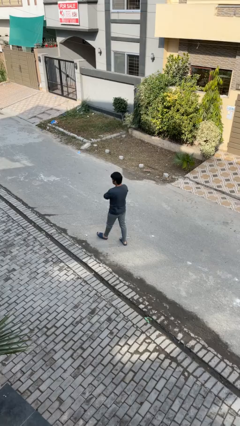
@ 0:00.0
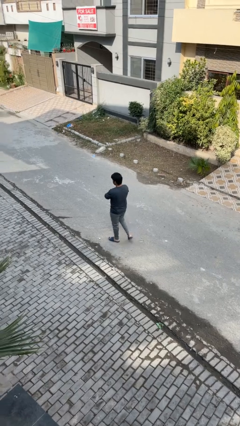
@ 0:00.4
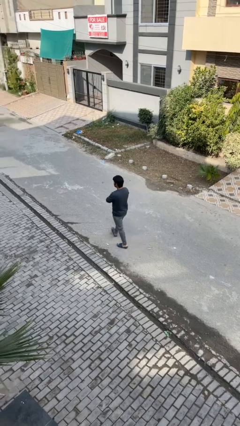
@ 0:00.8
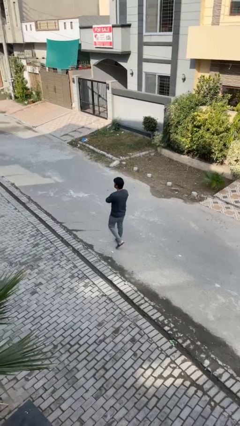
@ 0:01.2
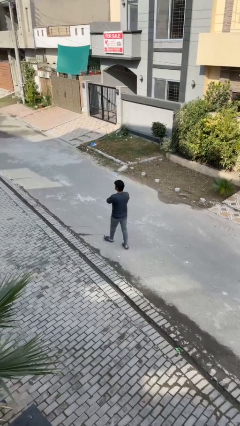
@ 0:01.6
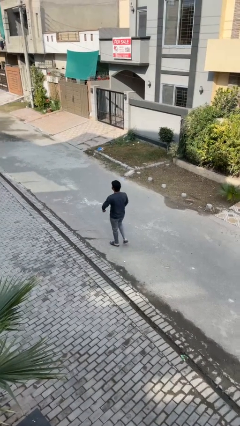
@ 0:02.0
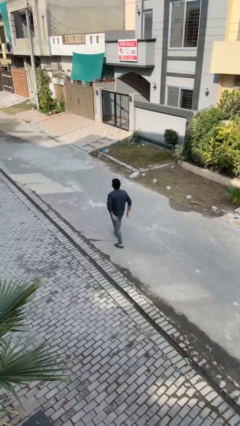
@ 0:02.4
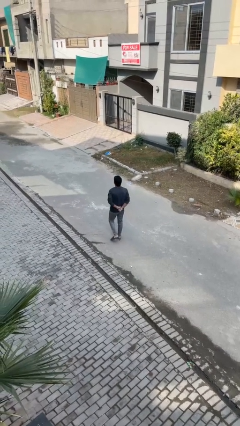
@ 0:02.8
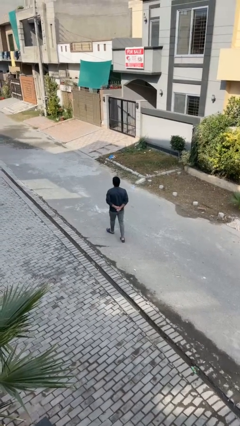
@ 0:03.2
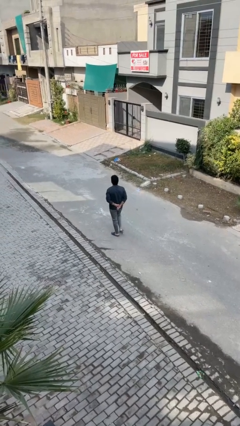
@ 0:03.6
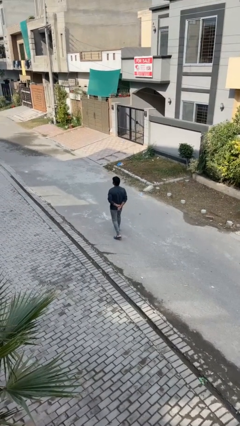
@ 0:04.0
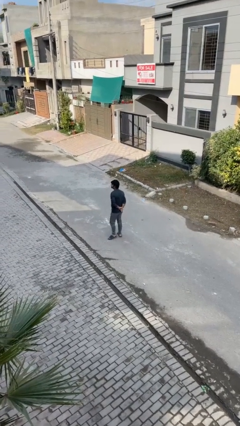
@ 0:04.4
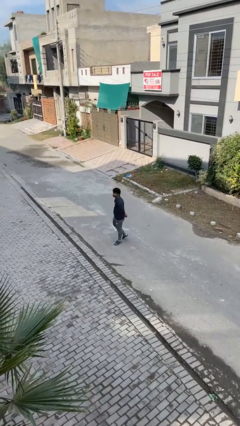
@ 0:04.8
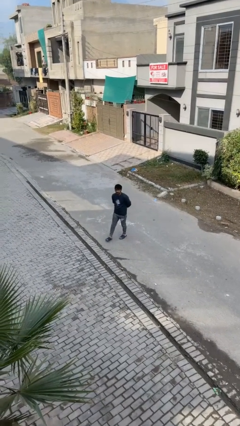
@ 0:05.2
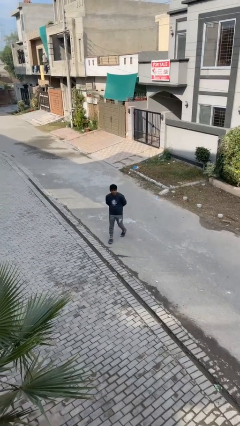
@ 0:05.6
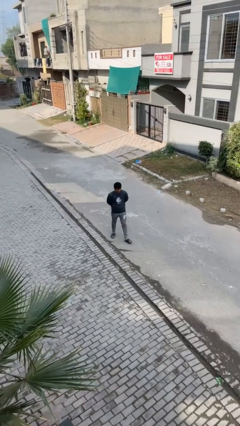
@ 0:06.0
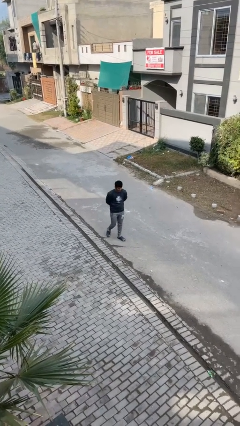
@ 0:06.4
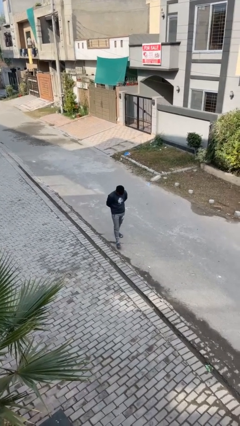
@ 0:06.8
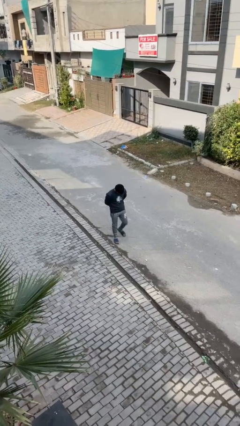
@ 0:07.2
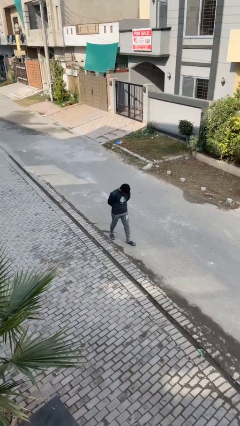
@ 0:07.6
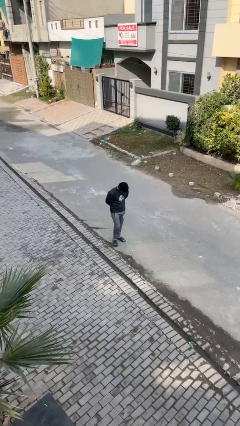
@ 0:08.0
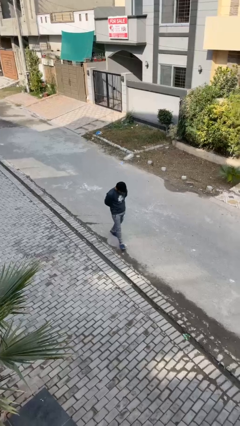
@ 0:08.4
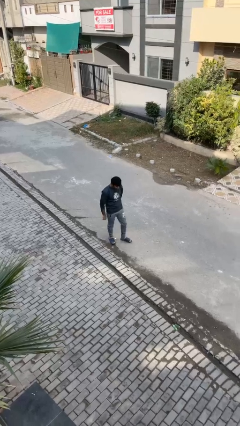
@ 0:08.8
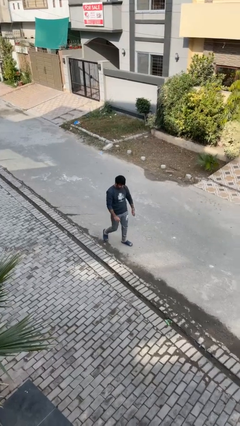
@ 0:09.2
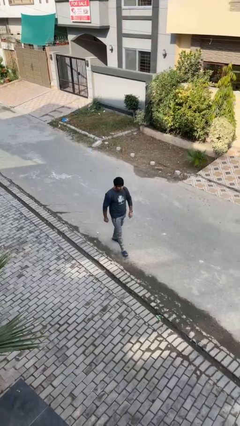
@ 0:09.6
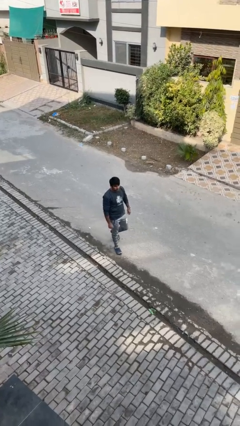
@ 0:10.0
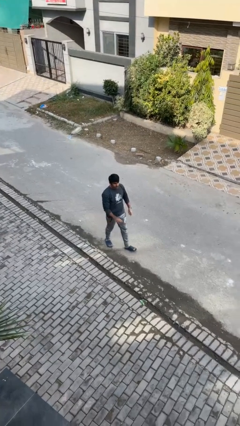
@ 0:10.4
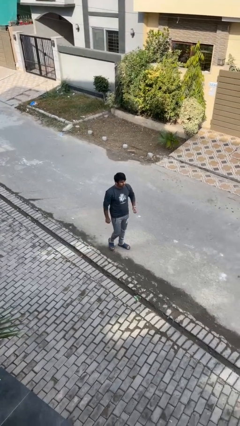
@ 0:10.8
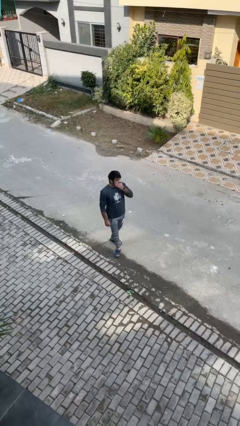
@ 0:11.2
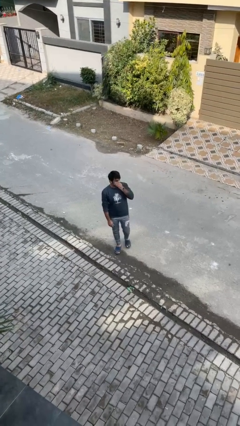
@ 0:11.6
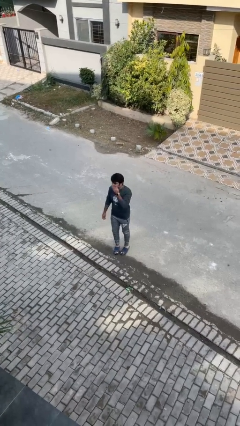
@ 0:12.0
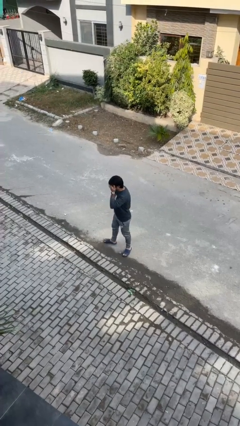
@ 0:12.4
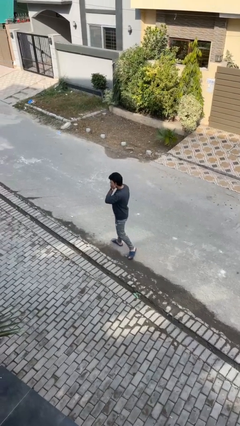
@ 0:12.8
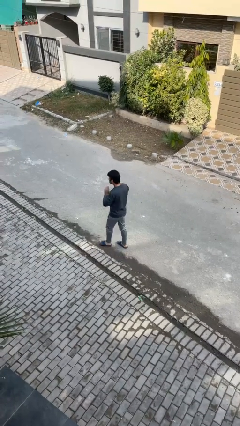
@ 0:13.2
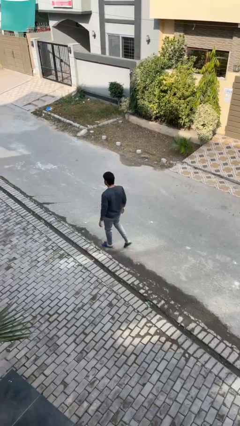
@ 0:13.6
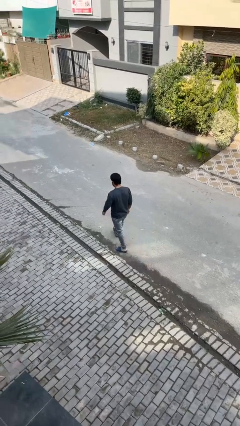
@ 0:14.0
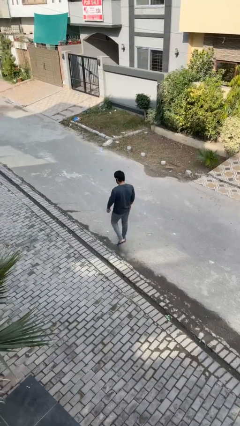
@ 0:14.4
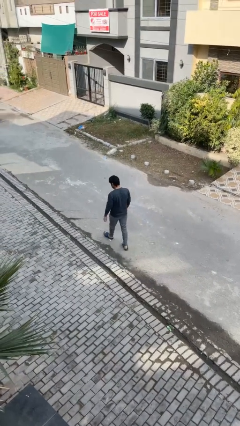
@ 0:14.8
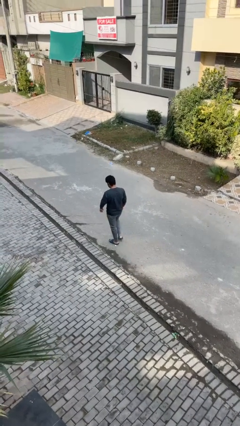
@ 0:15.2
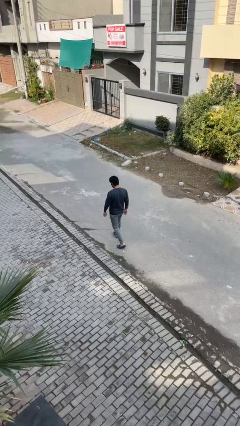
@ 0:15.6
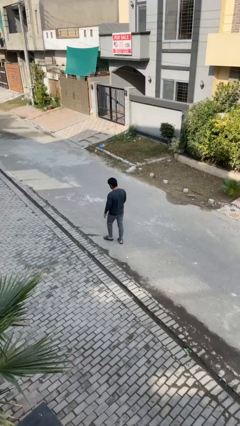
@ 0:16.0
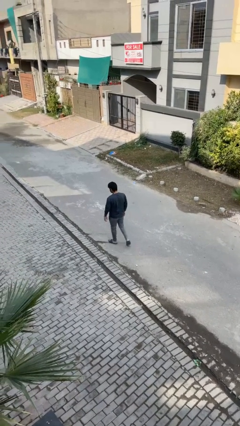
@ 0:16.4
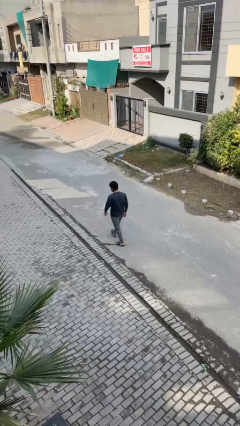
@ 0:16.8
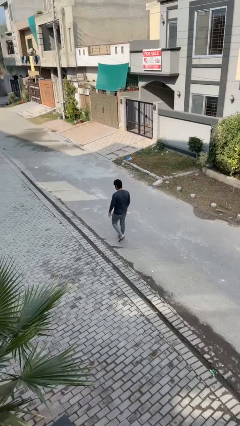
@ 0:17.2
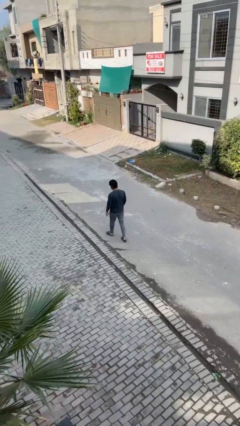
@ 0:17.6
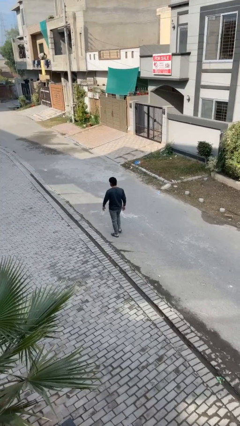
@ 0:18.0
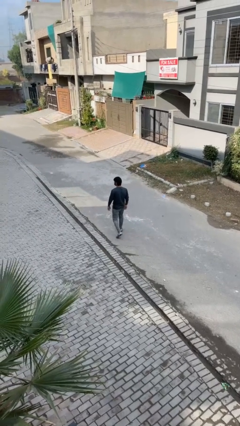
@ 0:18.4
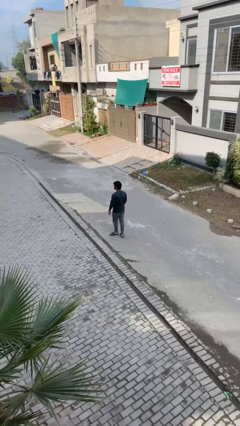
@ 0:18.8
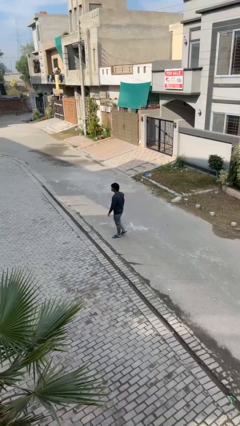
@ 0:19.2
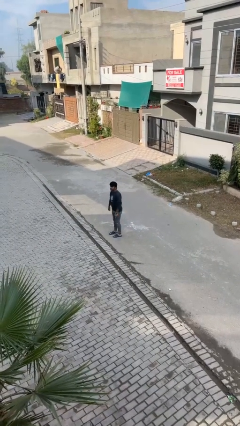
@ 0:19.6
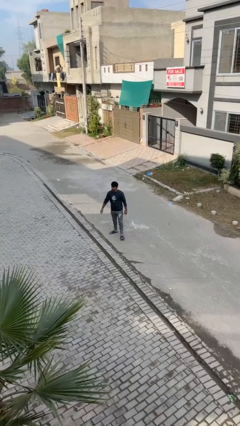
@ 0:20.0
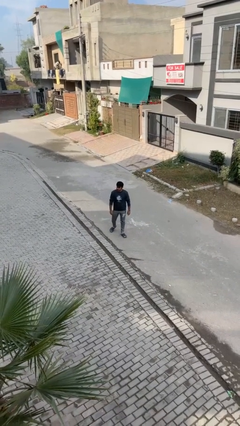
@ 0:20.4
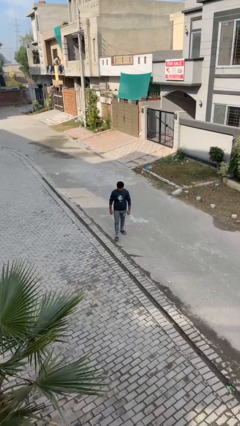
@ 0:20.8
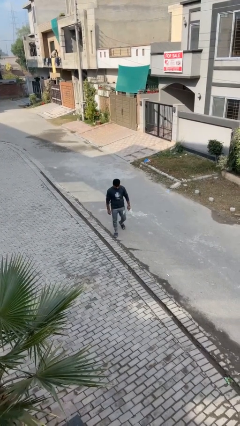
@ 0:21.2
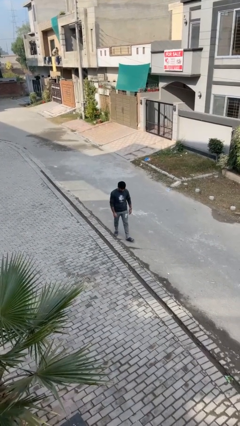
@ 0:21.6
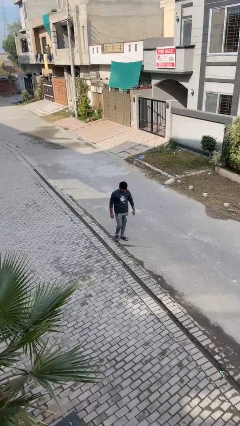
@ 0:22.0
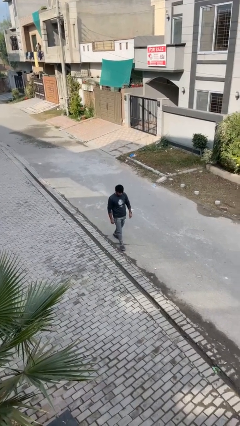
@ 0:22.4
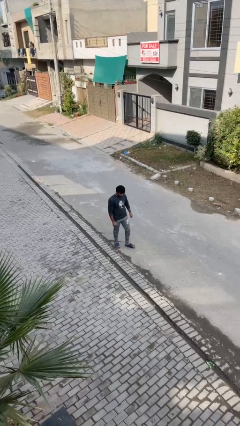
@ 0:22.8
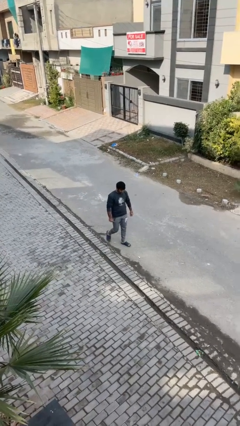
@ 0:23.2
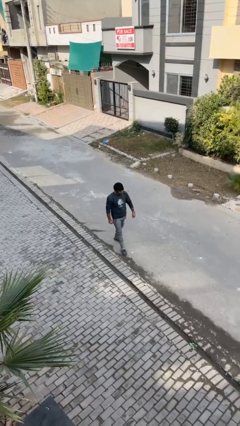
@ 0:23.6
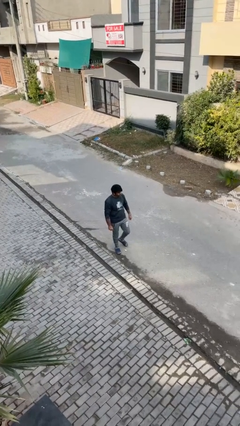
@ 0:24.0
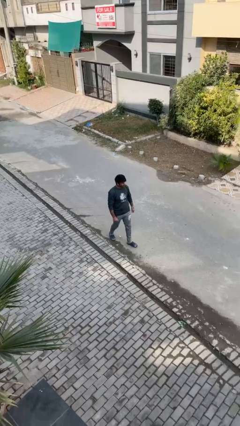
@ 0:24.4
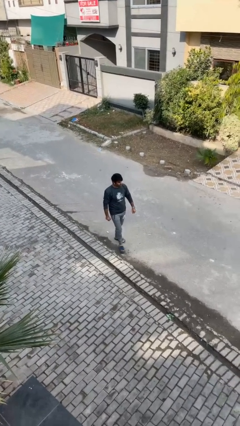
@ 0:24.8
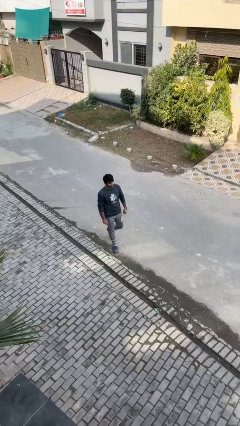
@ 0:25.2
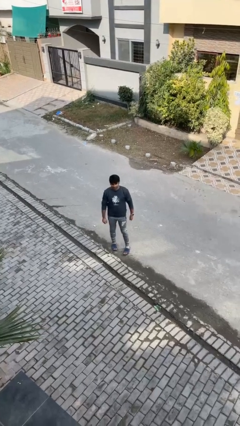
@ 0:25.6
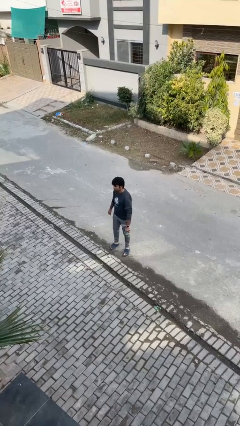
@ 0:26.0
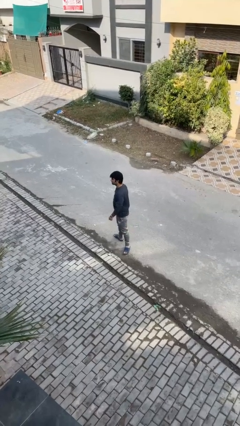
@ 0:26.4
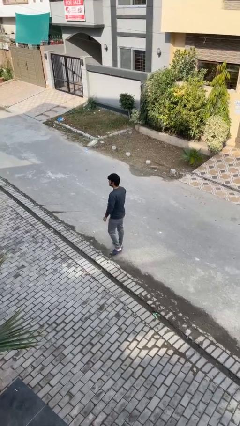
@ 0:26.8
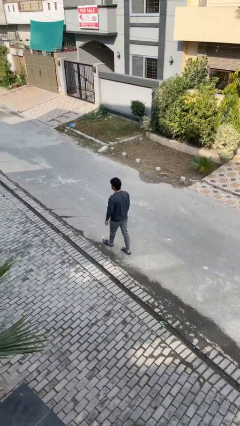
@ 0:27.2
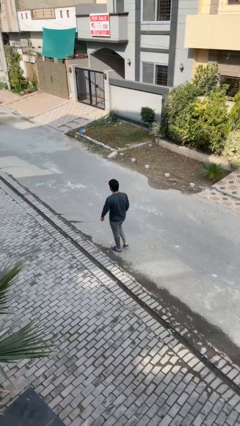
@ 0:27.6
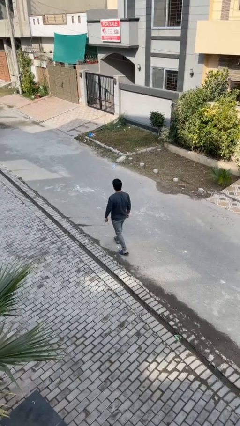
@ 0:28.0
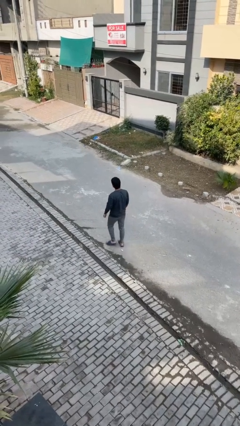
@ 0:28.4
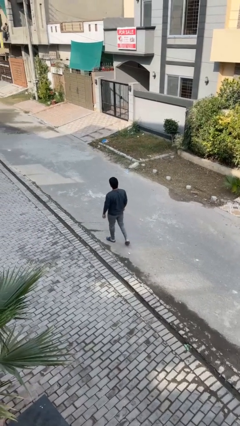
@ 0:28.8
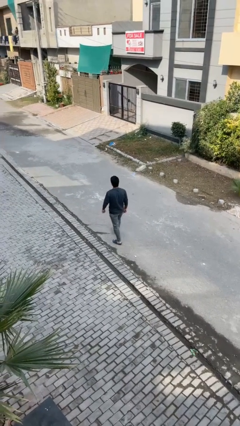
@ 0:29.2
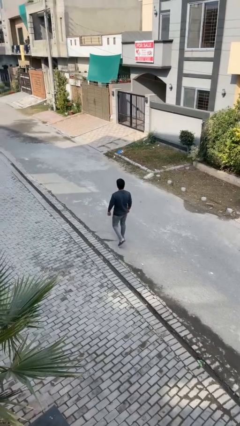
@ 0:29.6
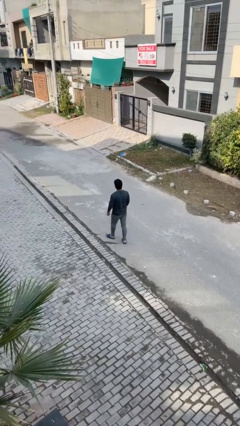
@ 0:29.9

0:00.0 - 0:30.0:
person walks

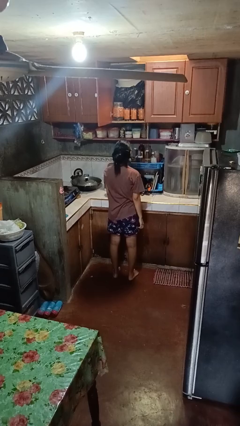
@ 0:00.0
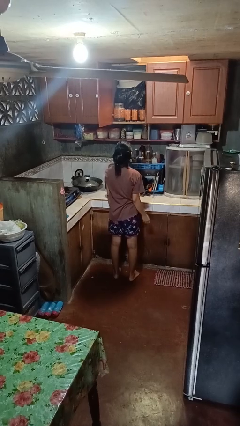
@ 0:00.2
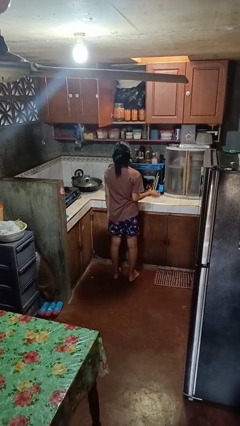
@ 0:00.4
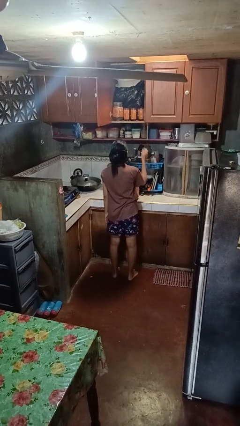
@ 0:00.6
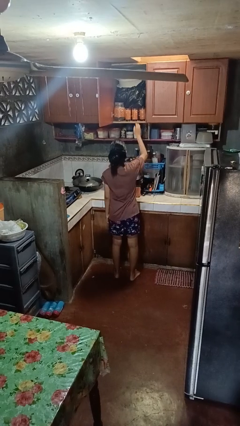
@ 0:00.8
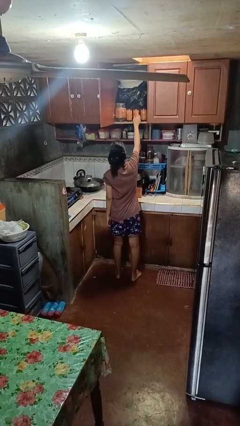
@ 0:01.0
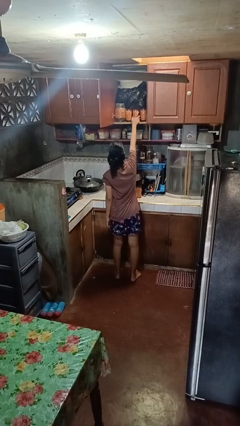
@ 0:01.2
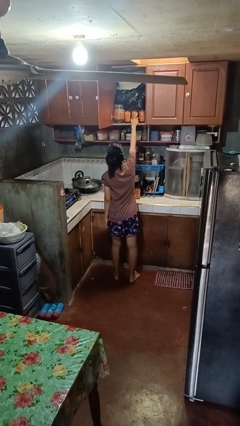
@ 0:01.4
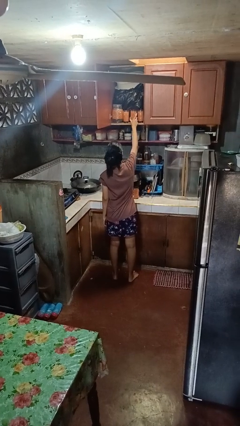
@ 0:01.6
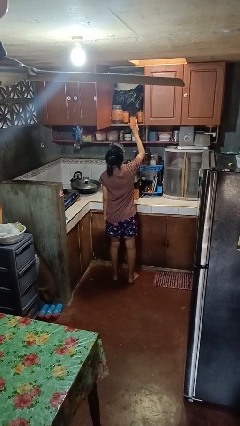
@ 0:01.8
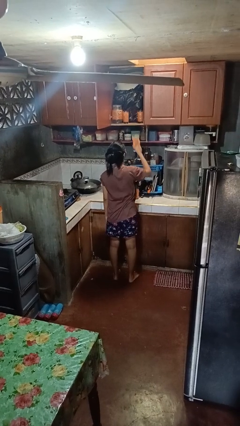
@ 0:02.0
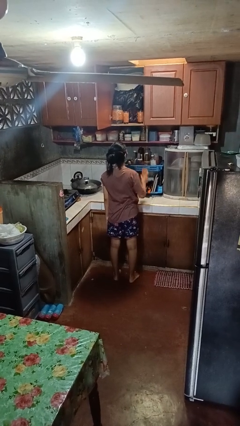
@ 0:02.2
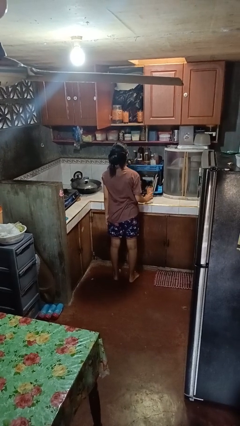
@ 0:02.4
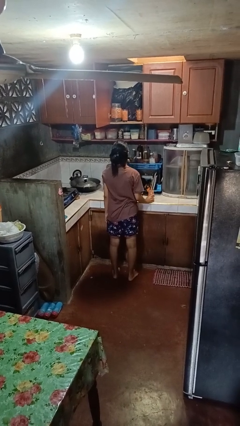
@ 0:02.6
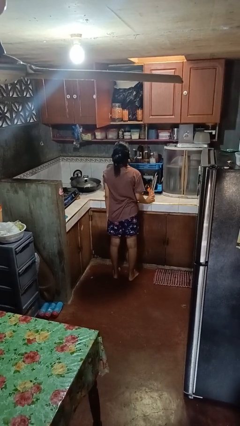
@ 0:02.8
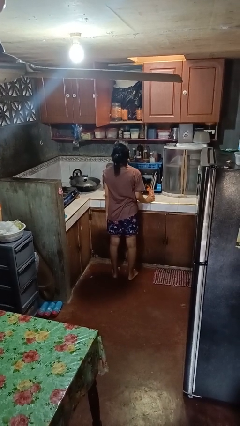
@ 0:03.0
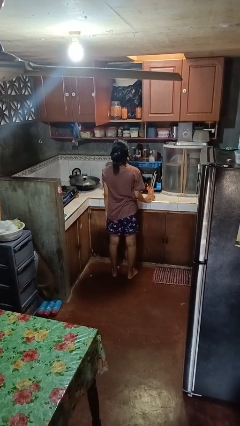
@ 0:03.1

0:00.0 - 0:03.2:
person takes object from cabinet

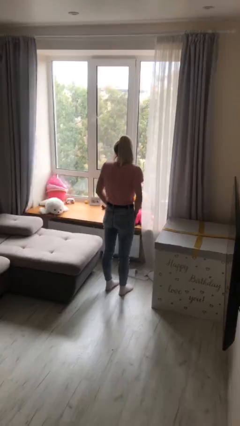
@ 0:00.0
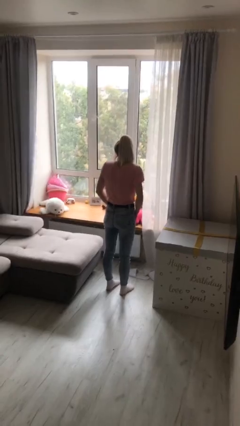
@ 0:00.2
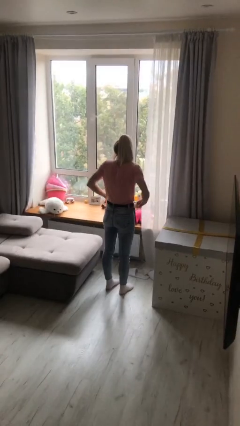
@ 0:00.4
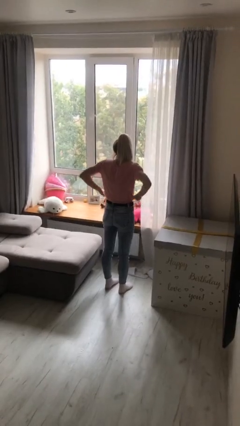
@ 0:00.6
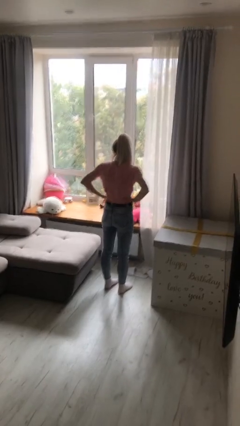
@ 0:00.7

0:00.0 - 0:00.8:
person puts hands in back pockets
